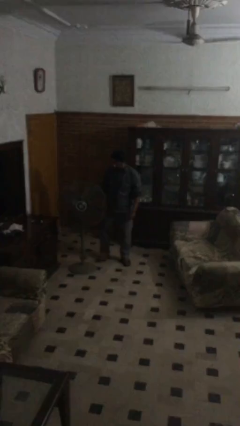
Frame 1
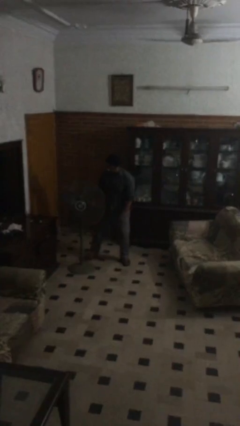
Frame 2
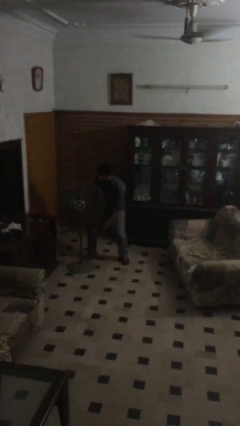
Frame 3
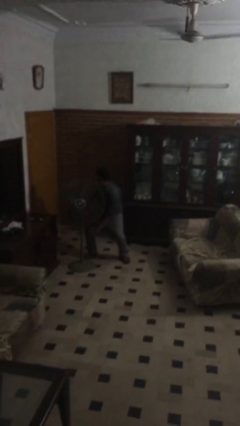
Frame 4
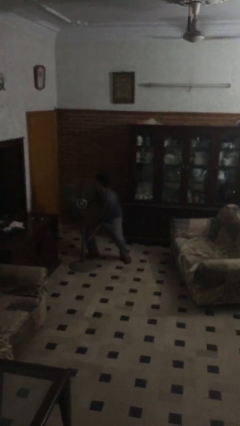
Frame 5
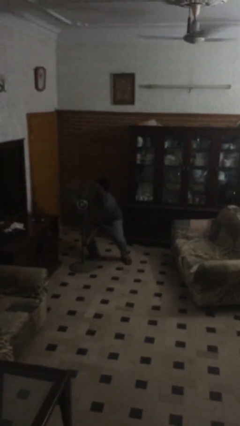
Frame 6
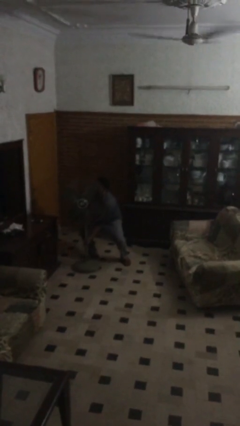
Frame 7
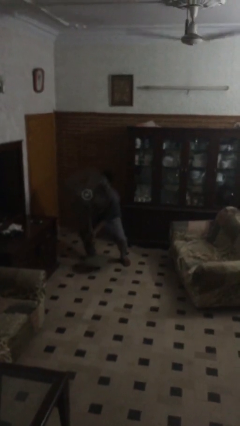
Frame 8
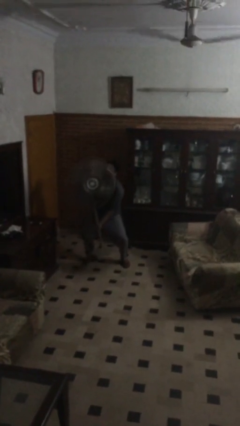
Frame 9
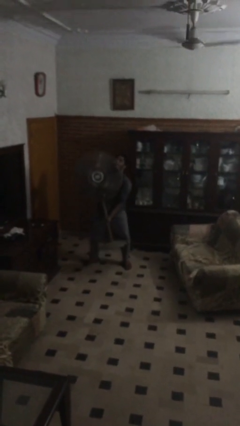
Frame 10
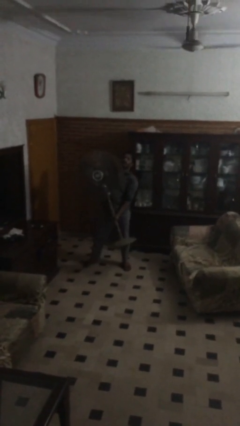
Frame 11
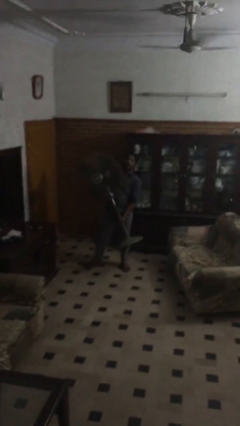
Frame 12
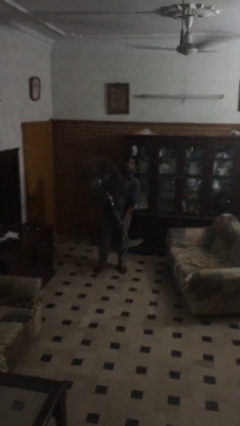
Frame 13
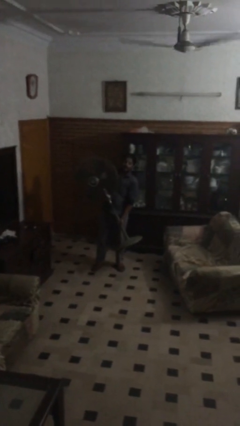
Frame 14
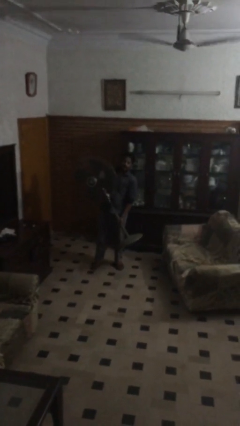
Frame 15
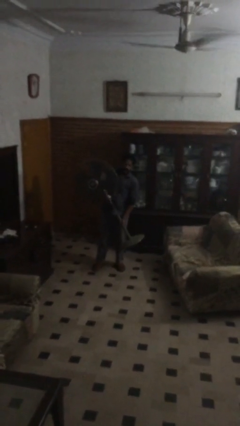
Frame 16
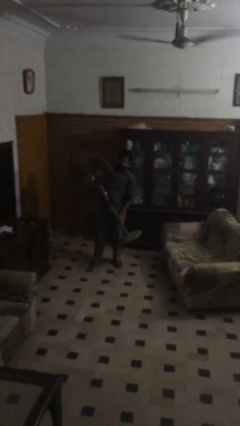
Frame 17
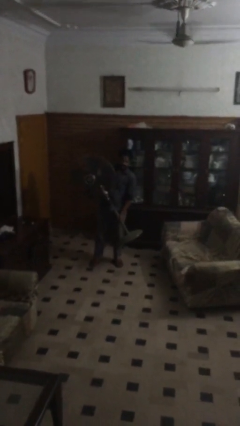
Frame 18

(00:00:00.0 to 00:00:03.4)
person picks up object from floor

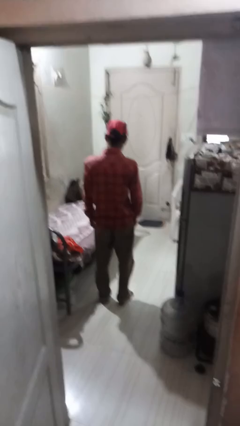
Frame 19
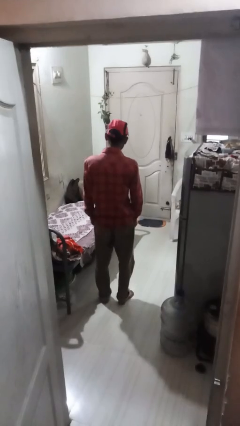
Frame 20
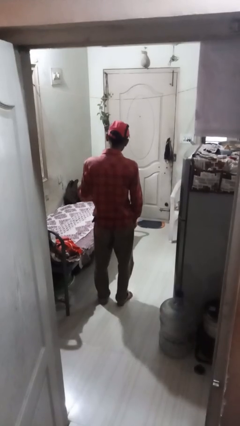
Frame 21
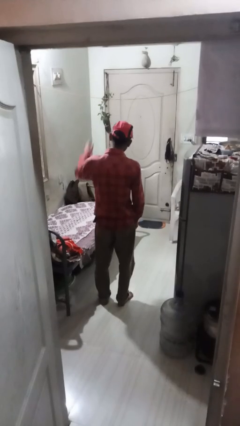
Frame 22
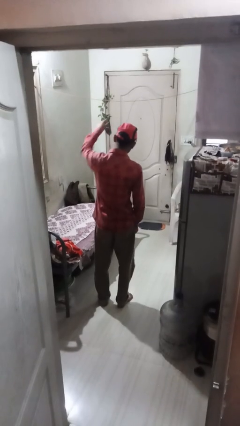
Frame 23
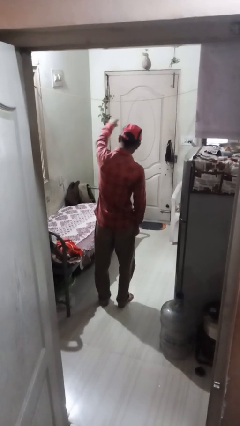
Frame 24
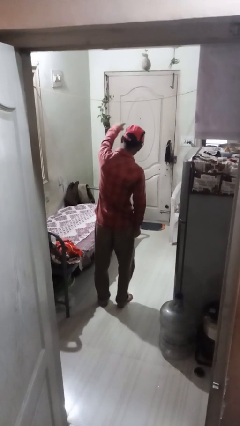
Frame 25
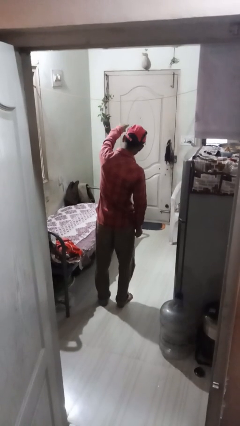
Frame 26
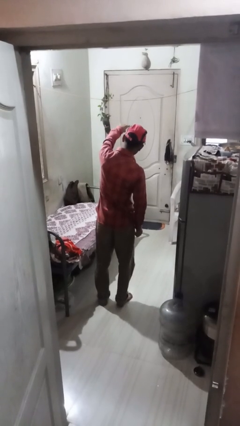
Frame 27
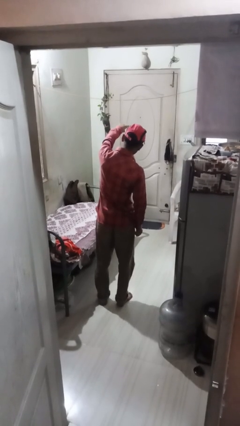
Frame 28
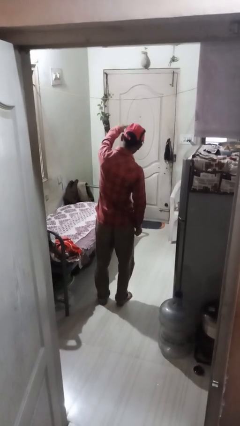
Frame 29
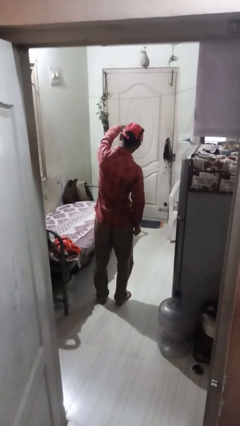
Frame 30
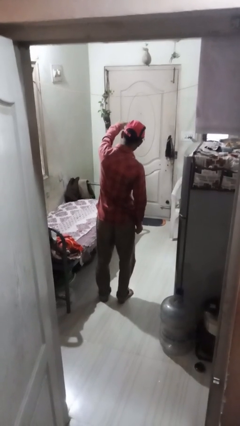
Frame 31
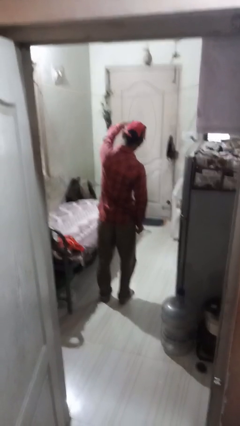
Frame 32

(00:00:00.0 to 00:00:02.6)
person points at person

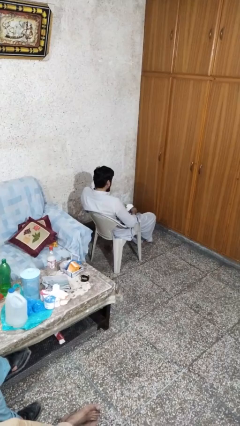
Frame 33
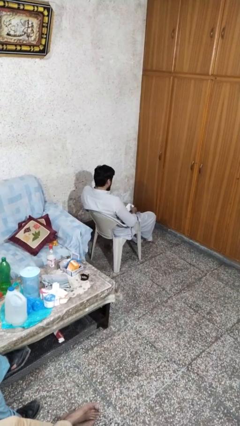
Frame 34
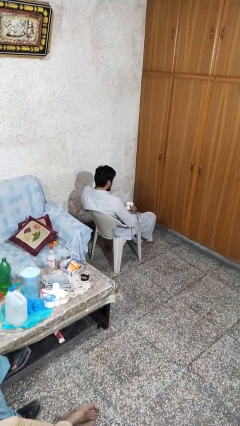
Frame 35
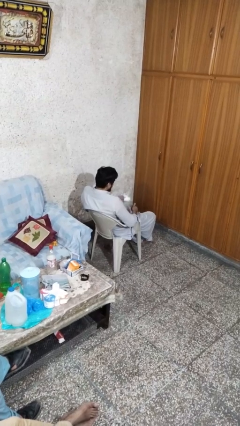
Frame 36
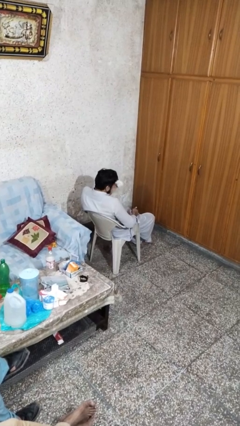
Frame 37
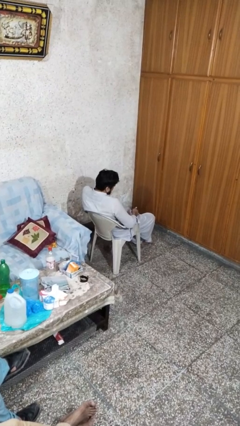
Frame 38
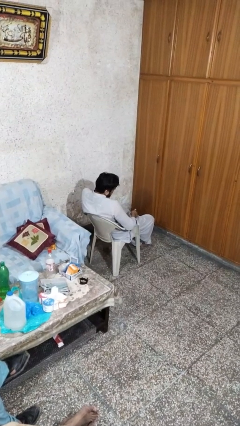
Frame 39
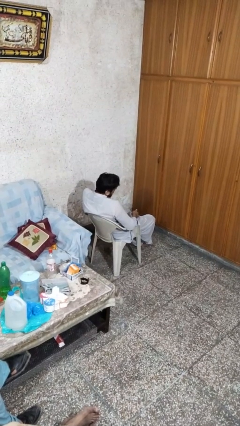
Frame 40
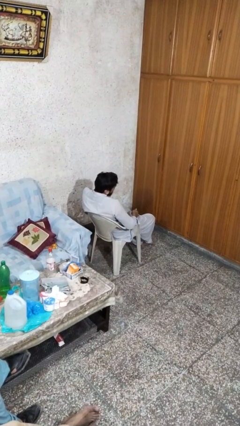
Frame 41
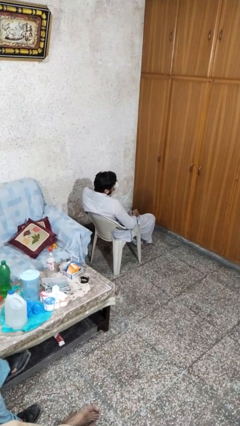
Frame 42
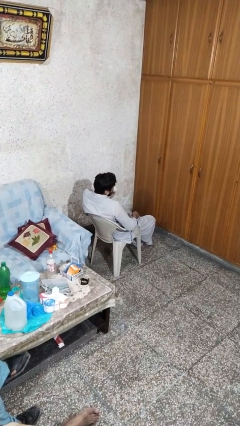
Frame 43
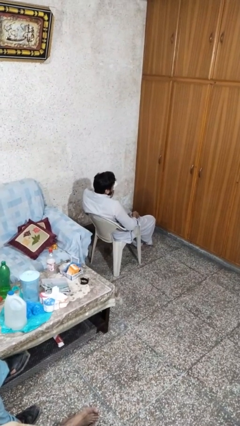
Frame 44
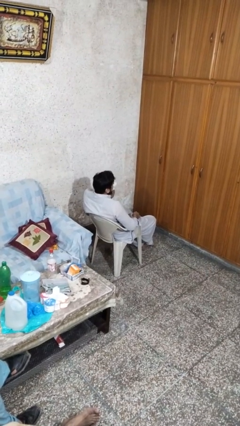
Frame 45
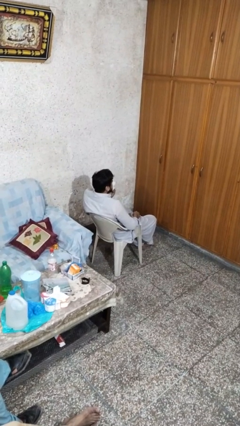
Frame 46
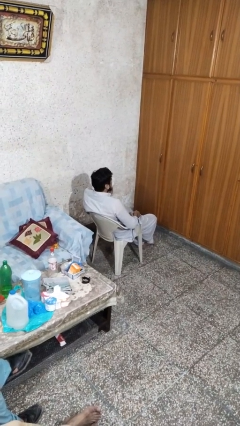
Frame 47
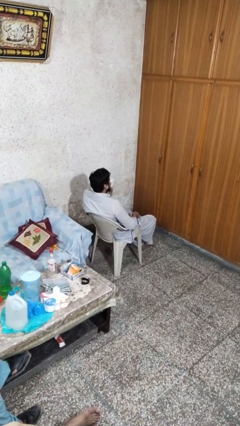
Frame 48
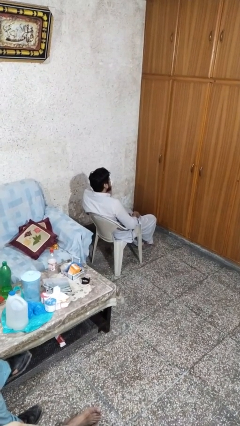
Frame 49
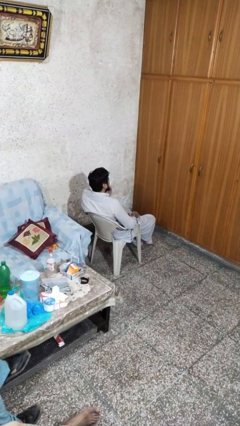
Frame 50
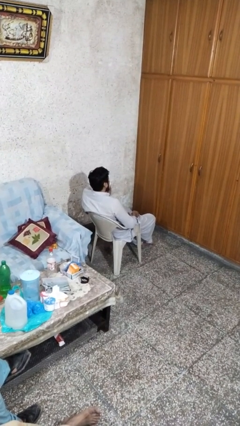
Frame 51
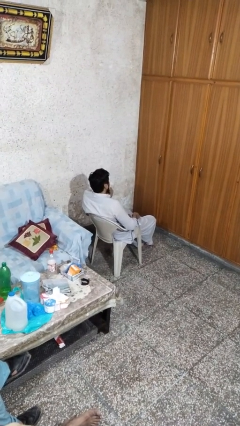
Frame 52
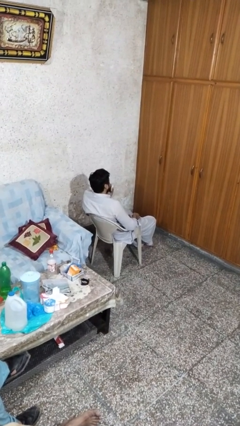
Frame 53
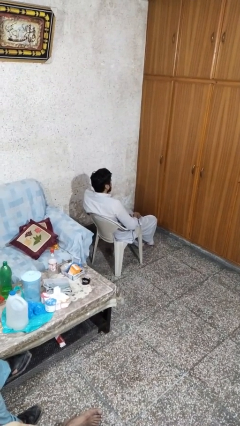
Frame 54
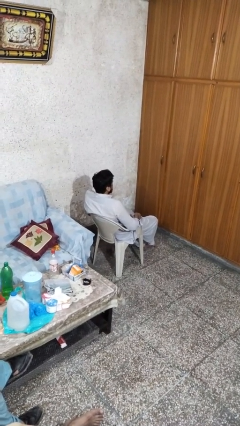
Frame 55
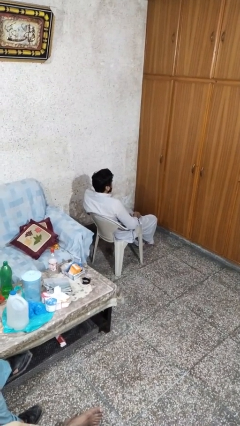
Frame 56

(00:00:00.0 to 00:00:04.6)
person wipes mouth with napkin

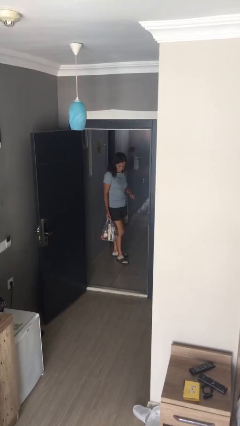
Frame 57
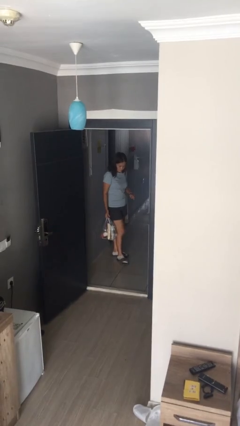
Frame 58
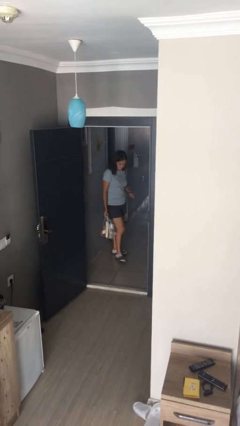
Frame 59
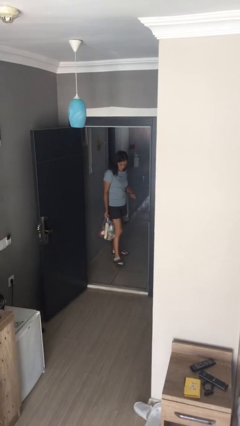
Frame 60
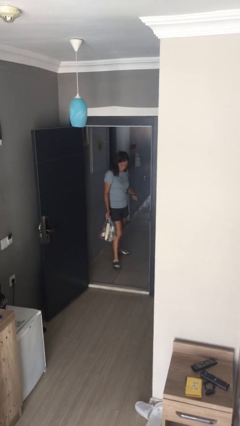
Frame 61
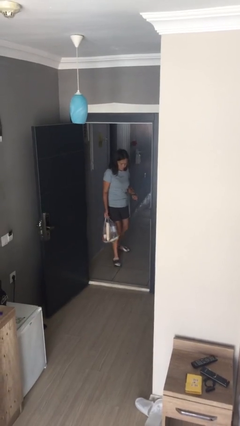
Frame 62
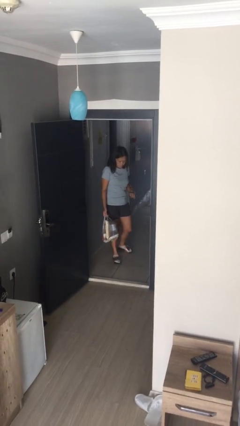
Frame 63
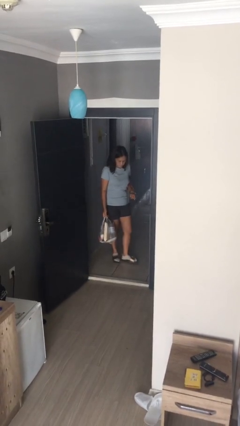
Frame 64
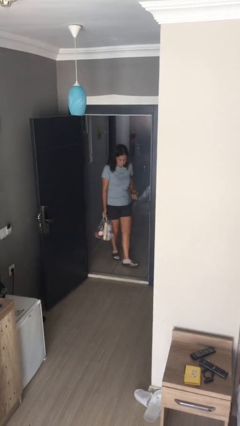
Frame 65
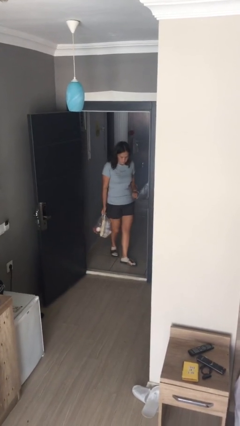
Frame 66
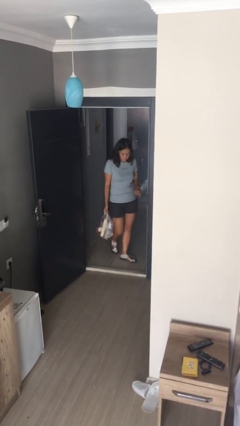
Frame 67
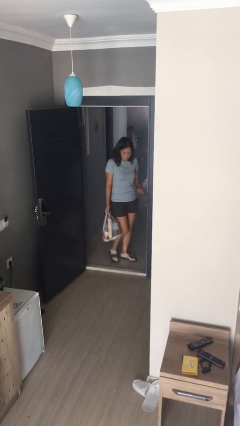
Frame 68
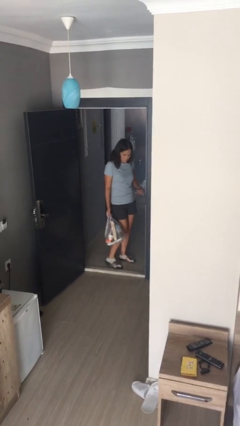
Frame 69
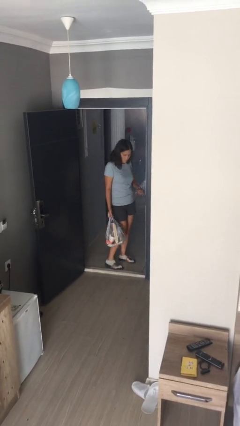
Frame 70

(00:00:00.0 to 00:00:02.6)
person carries groceries

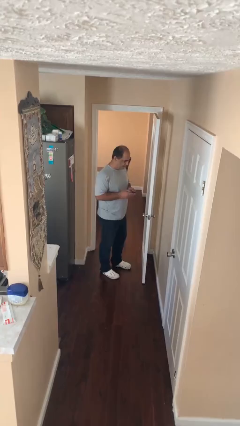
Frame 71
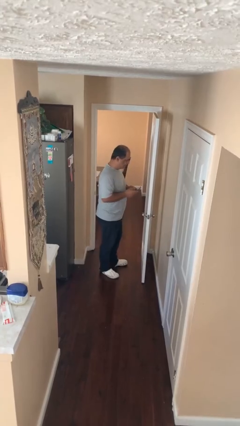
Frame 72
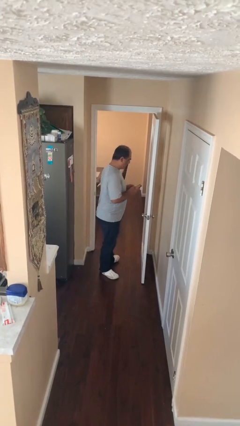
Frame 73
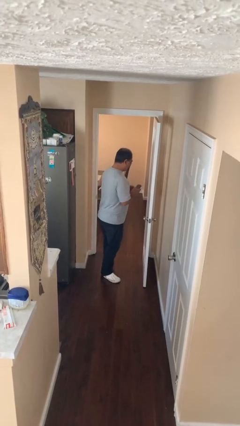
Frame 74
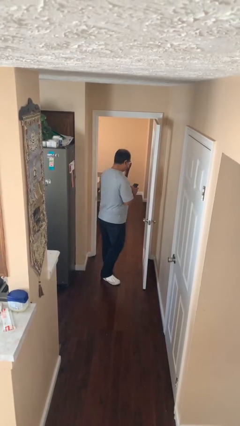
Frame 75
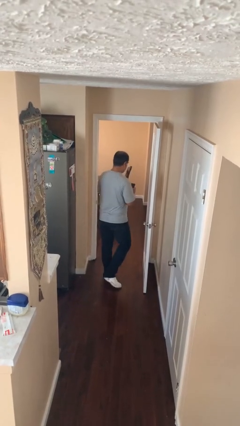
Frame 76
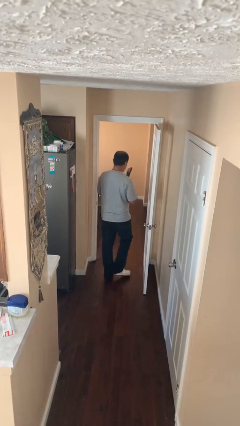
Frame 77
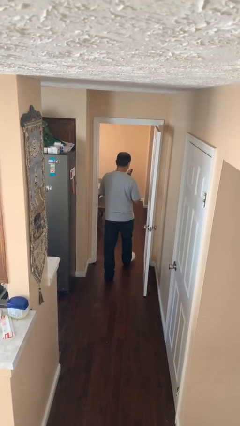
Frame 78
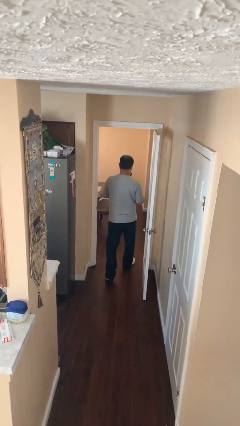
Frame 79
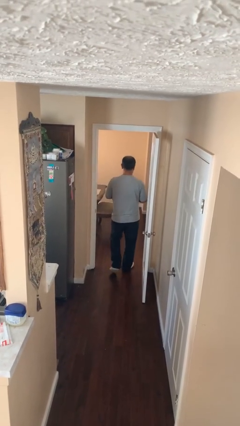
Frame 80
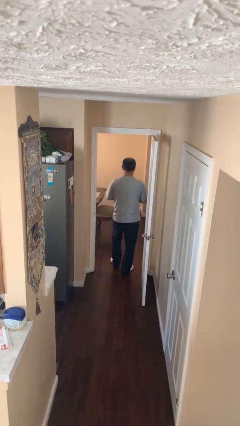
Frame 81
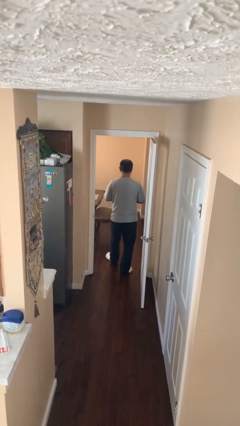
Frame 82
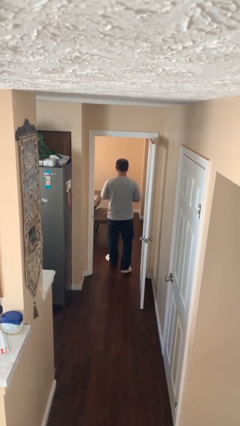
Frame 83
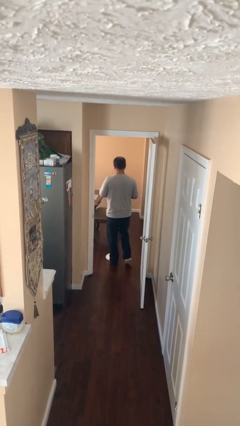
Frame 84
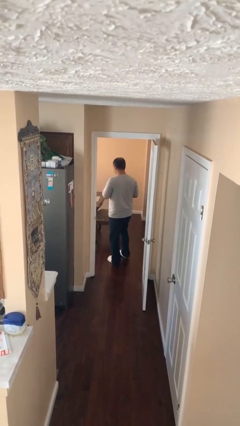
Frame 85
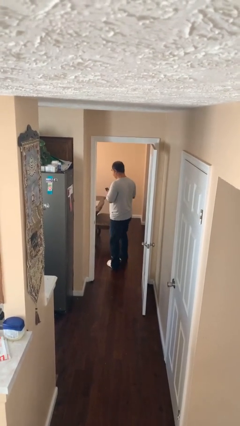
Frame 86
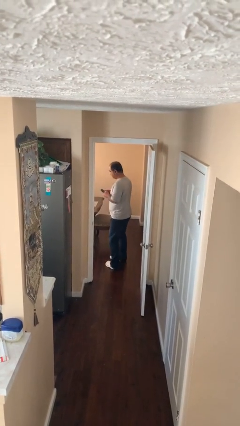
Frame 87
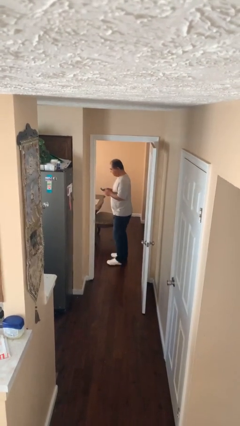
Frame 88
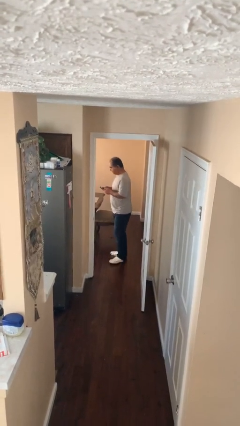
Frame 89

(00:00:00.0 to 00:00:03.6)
person exits scene through structure

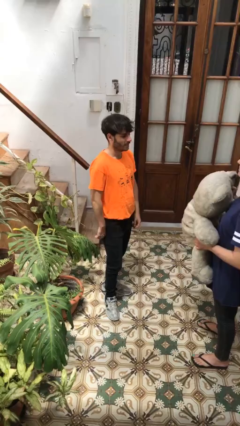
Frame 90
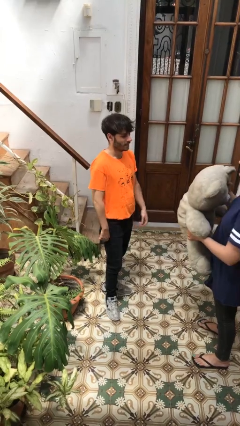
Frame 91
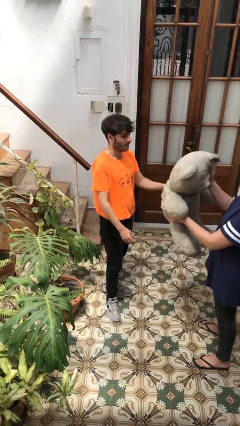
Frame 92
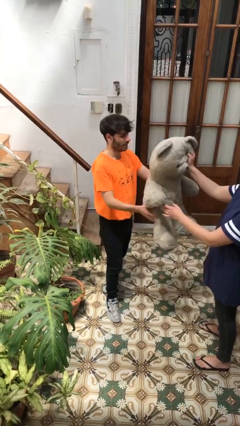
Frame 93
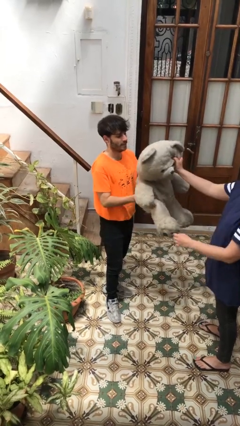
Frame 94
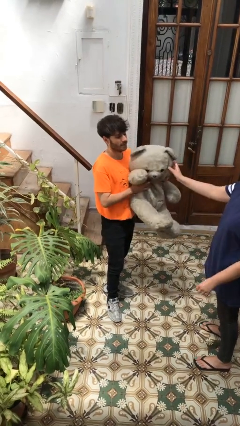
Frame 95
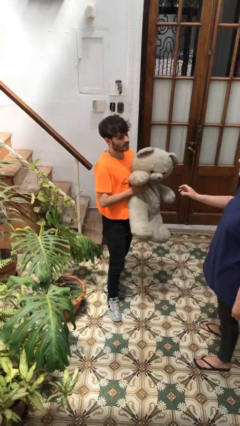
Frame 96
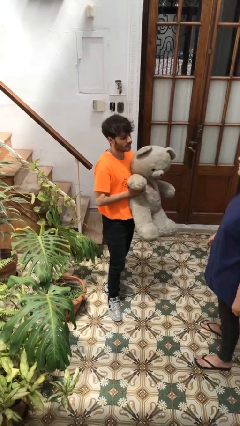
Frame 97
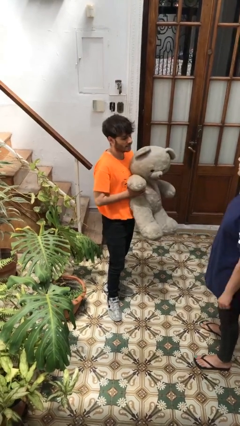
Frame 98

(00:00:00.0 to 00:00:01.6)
person transfers object to person
